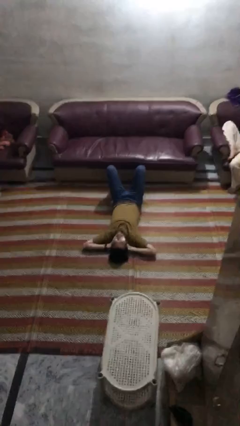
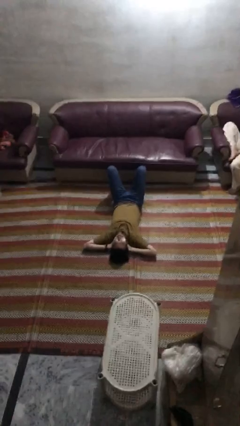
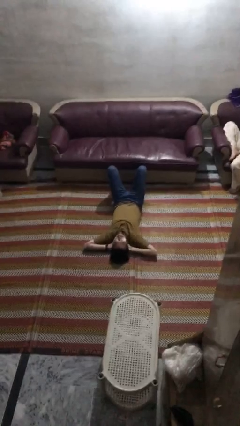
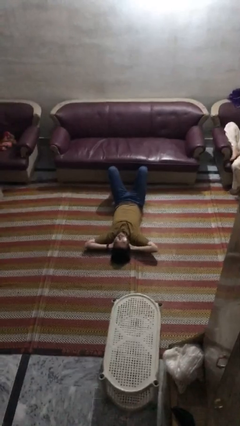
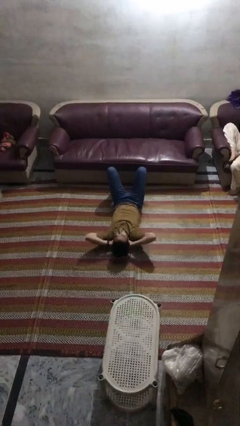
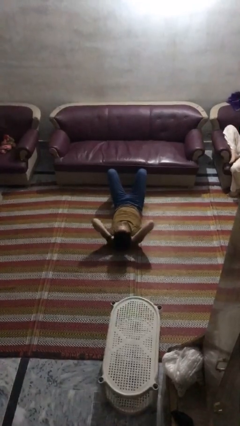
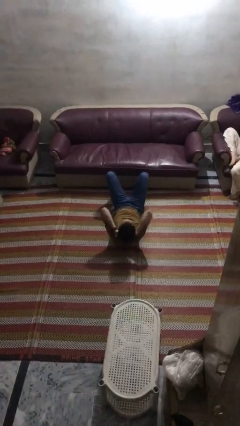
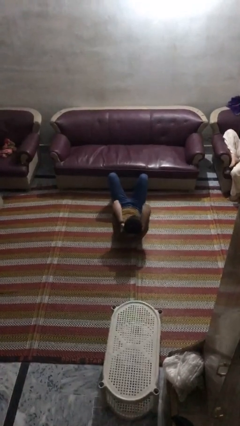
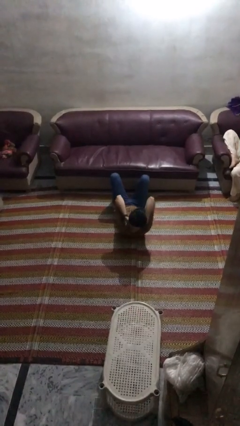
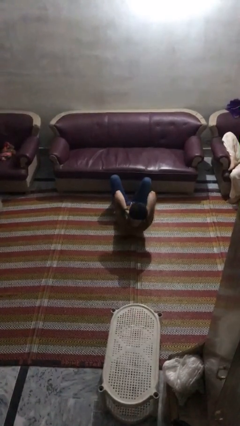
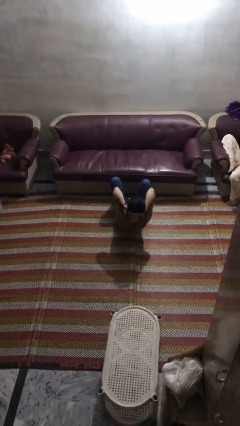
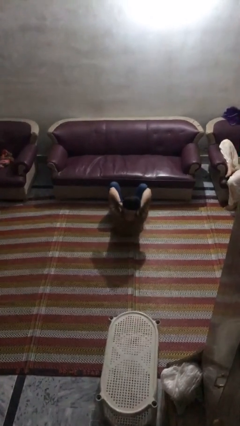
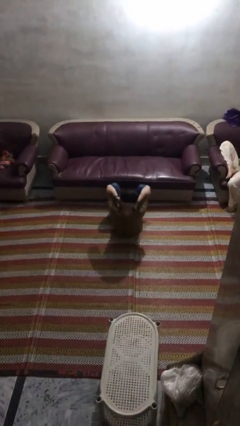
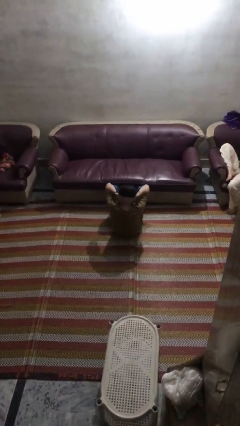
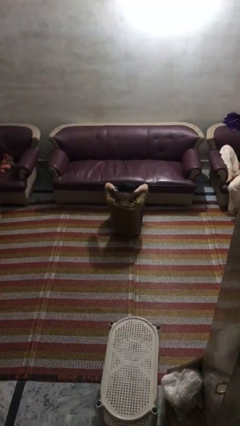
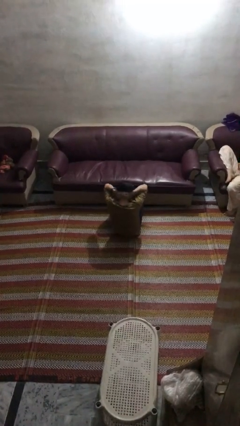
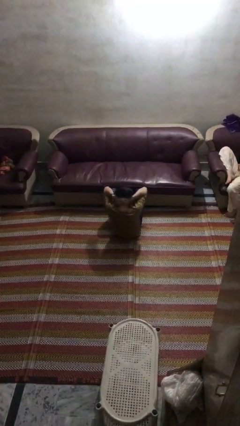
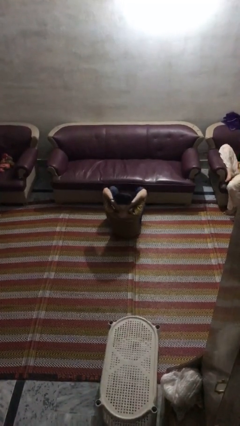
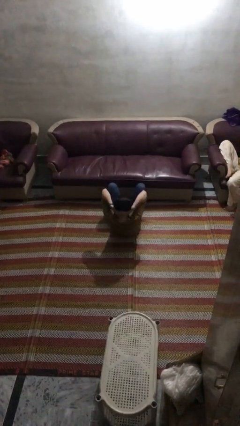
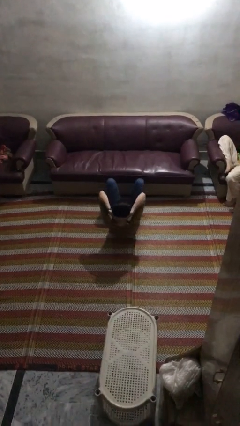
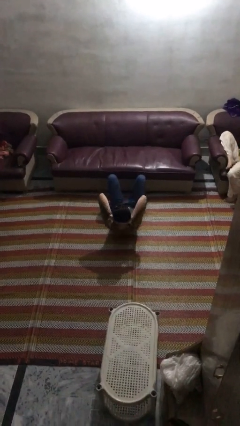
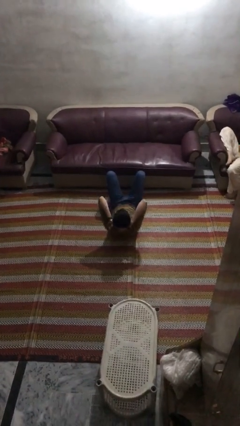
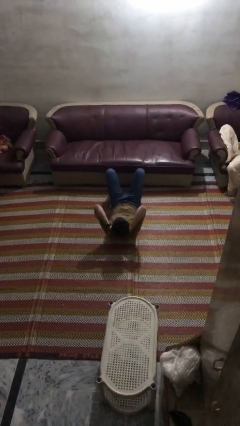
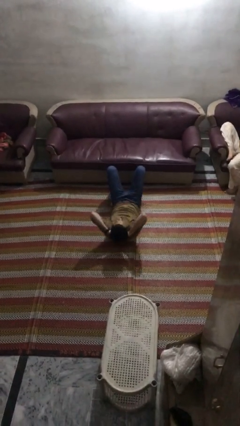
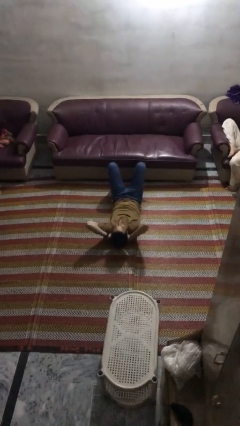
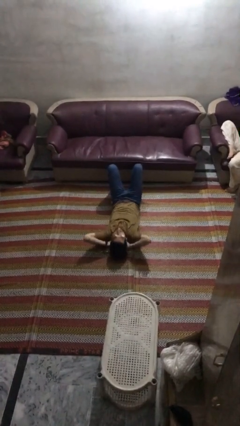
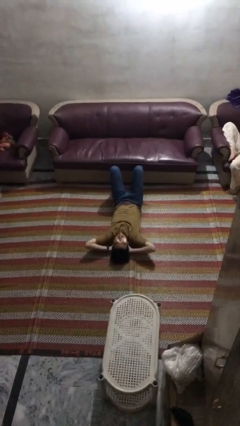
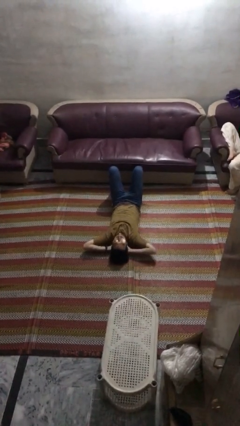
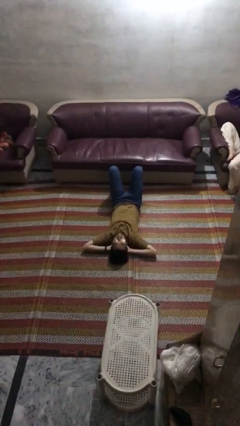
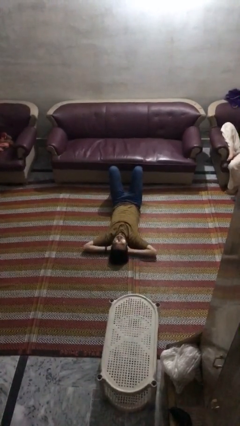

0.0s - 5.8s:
person exercises with situp

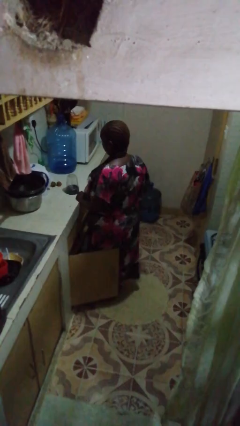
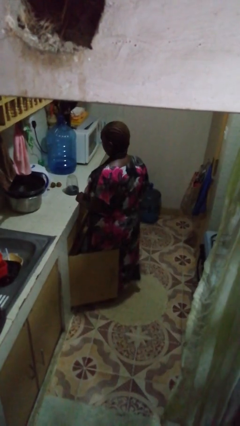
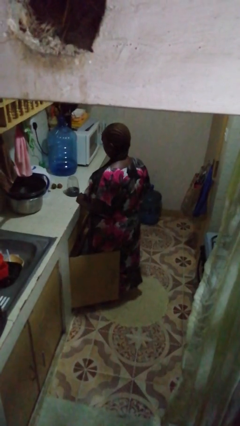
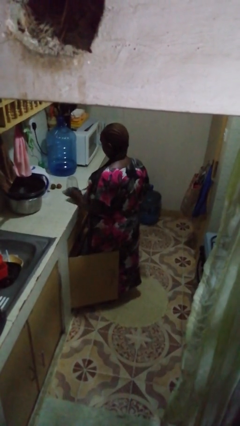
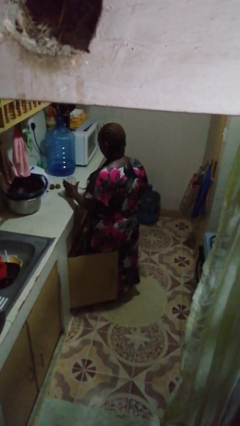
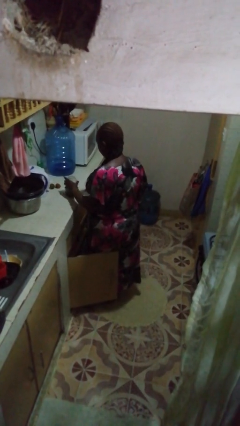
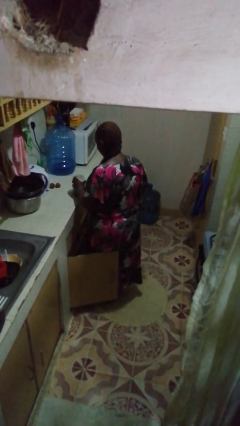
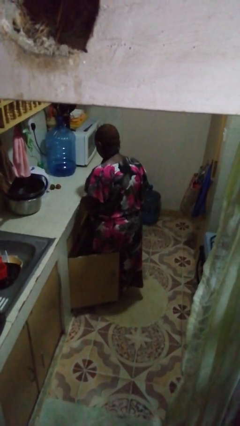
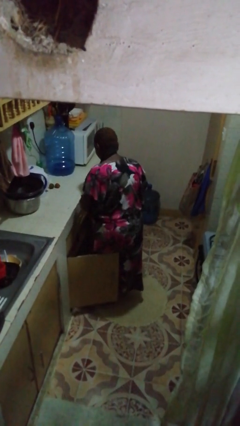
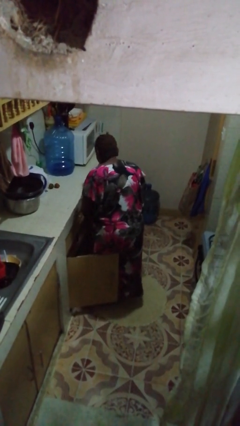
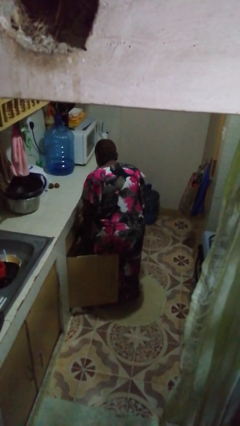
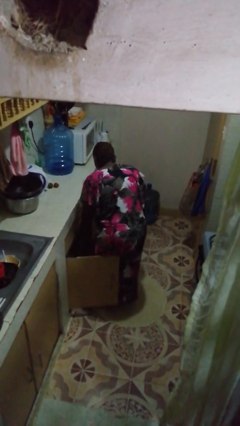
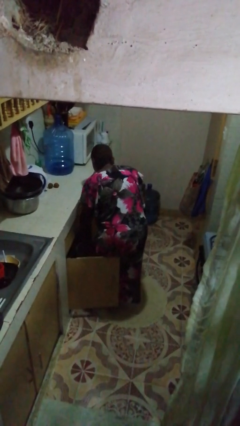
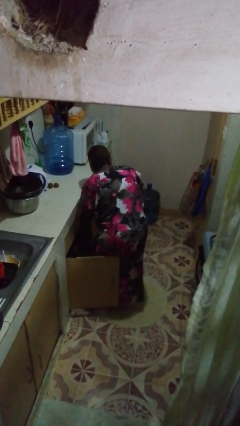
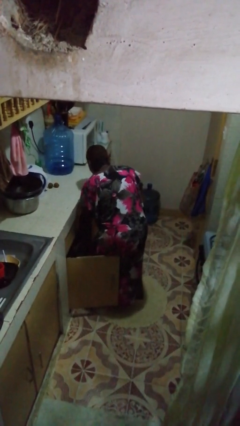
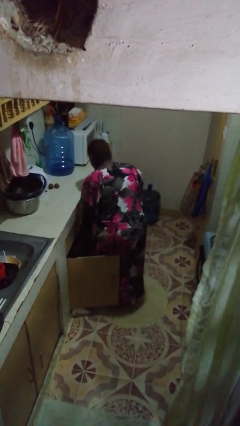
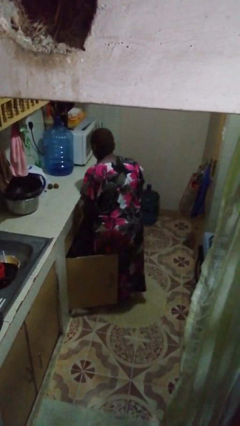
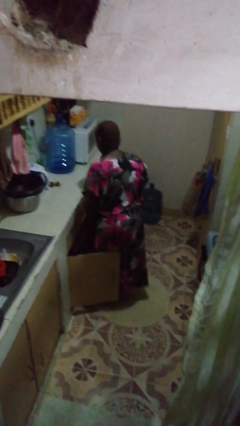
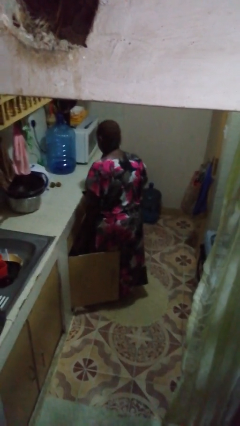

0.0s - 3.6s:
person puts object in cabinet

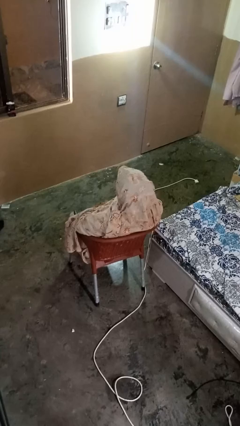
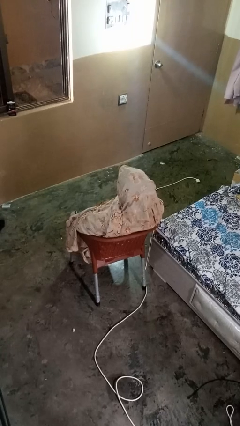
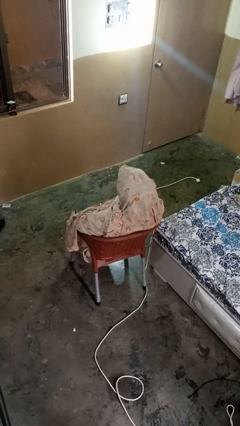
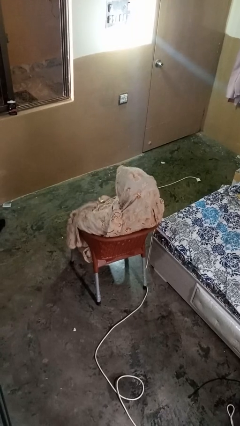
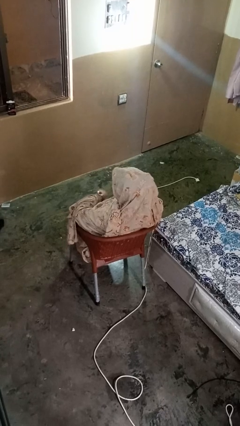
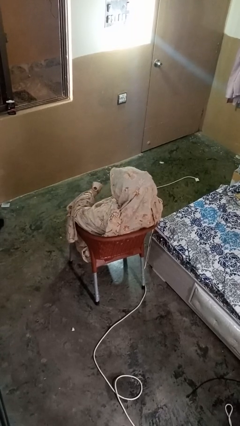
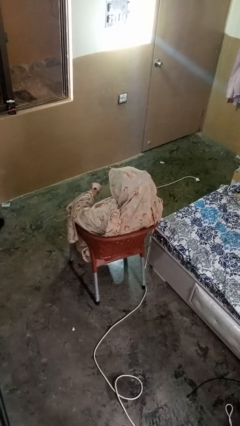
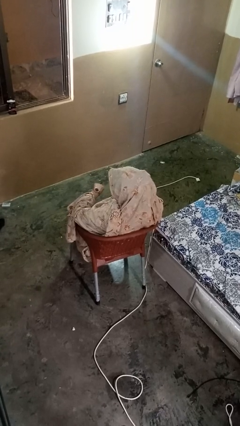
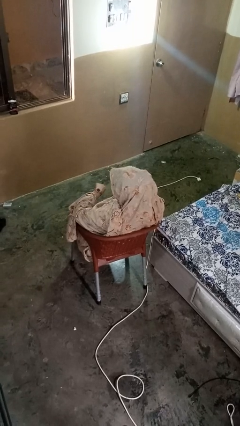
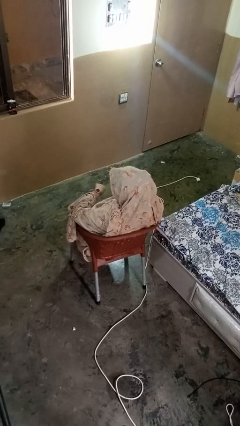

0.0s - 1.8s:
person looks at wristwatch

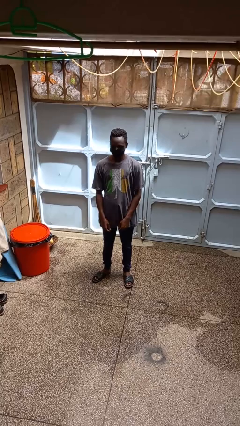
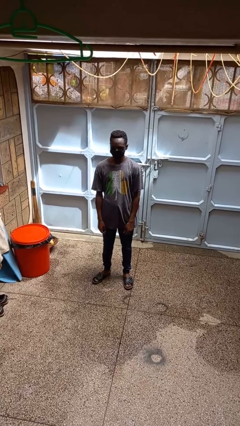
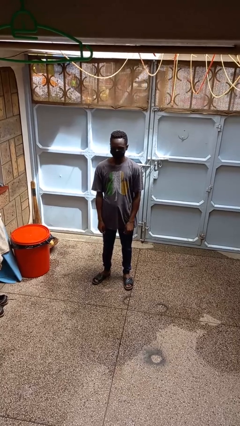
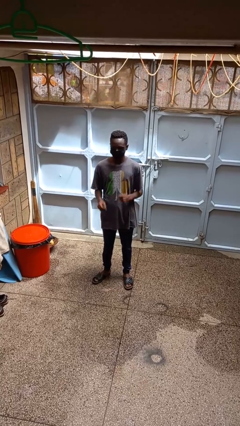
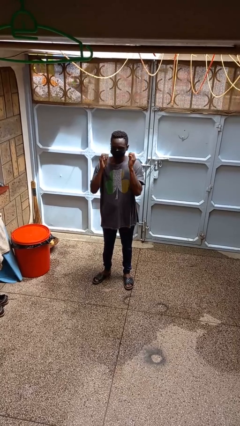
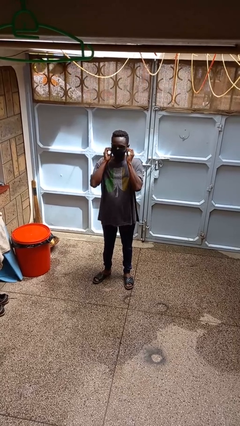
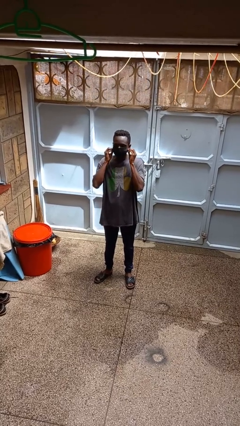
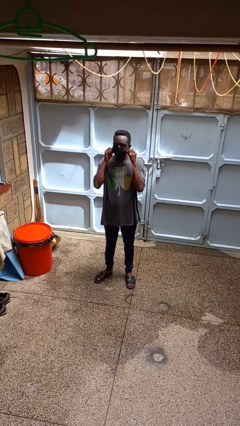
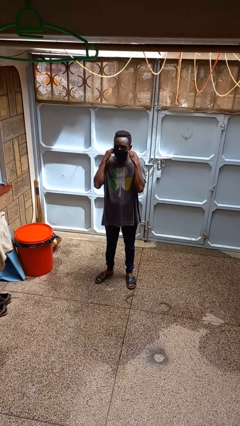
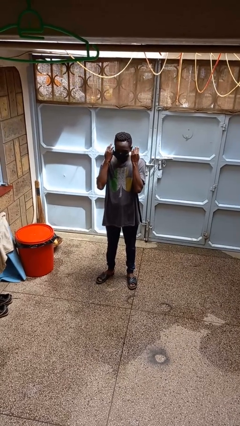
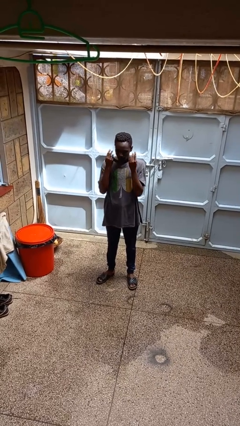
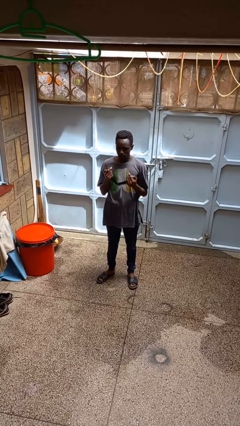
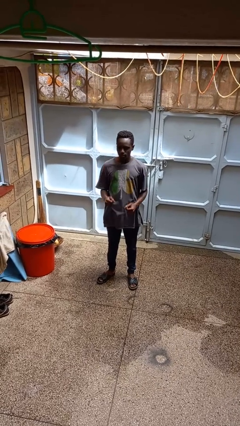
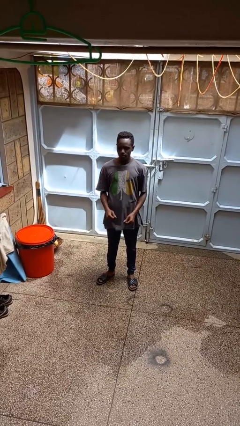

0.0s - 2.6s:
person takes off facemask

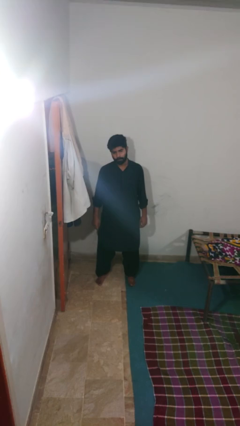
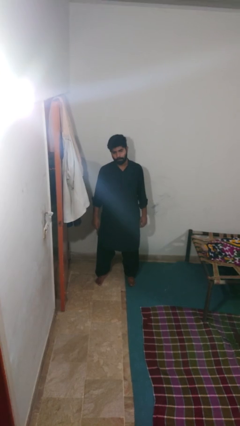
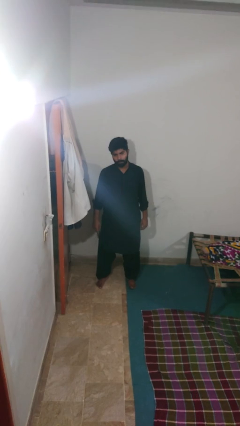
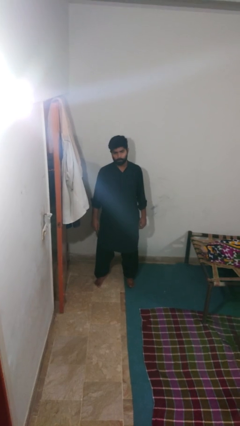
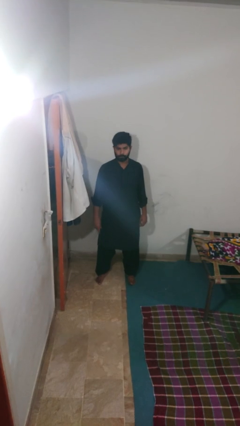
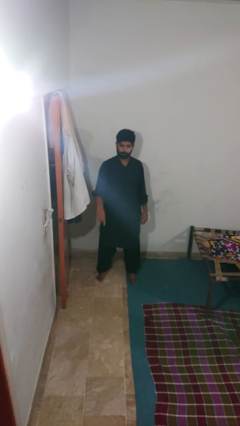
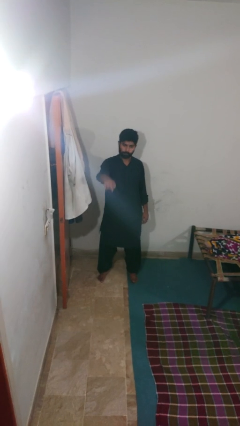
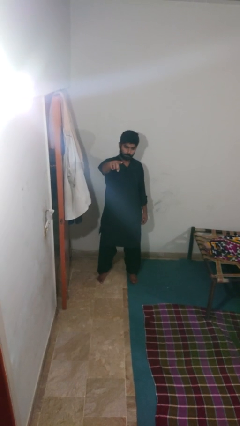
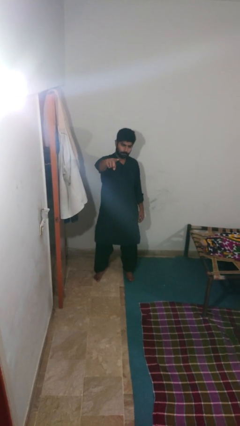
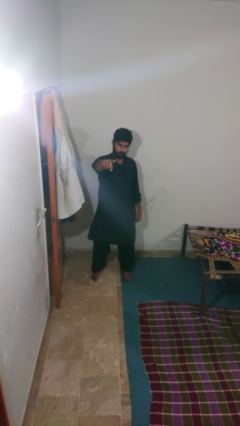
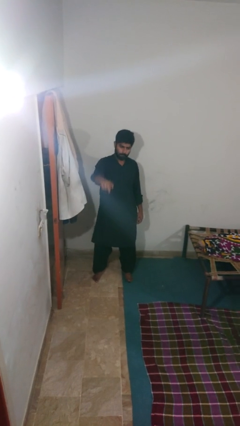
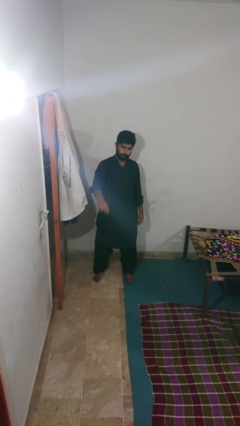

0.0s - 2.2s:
person points at person

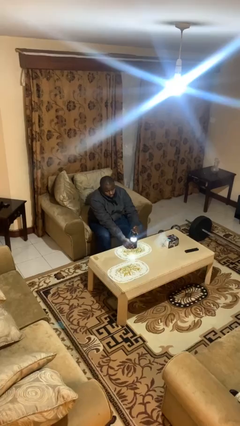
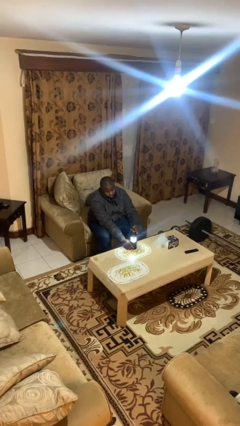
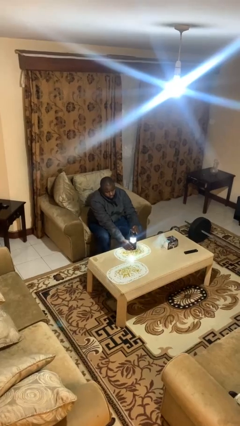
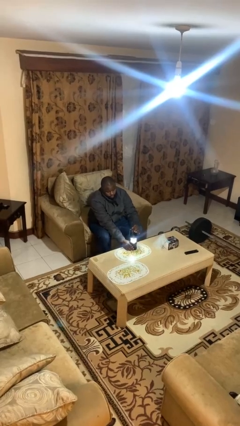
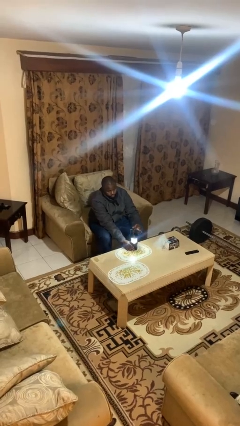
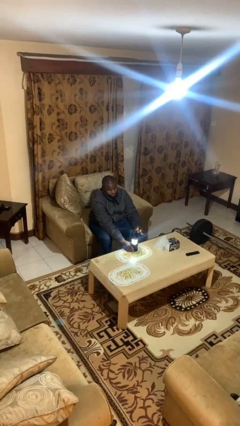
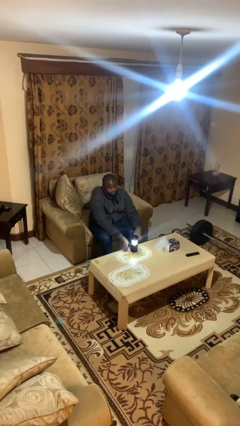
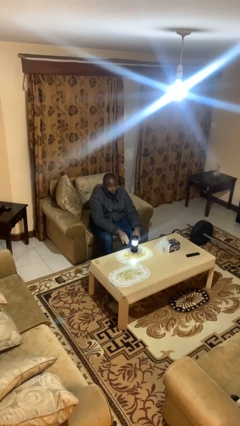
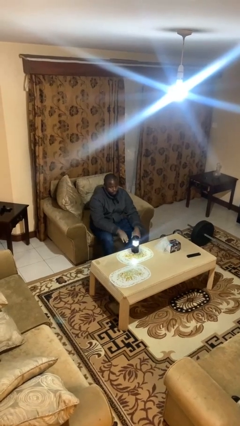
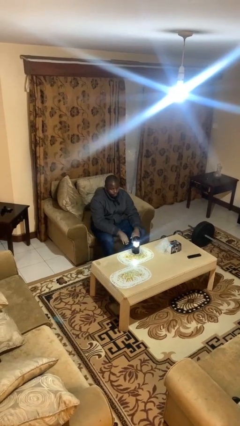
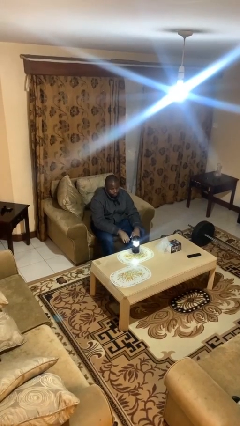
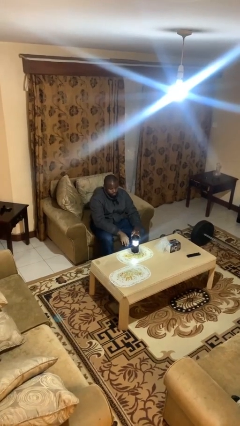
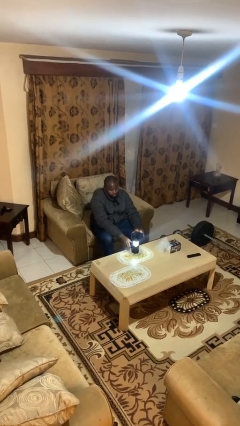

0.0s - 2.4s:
person turns on lamp
